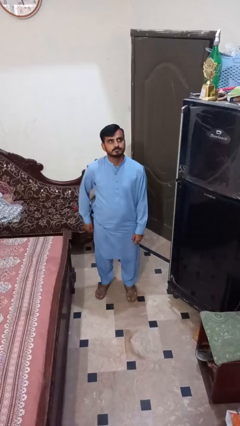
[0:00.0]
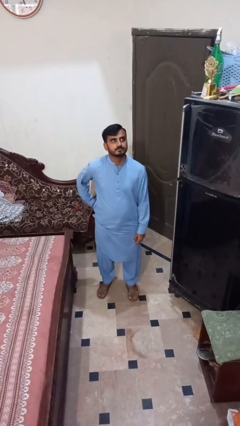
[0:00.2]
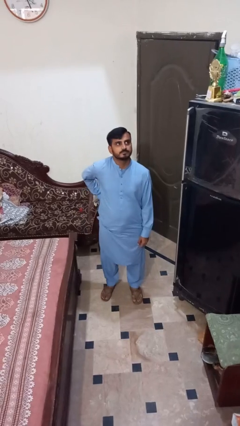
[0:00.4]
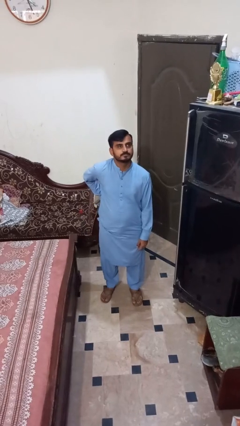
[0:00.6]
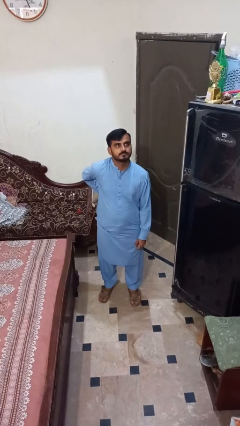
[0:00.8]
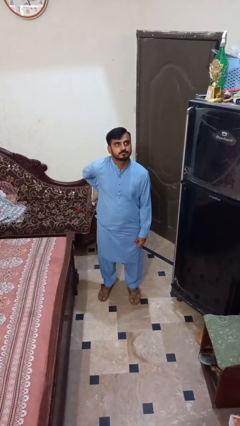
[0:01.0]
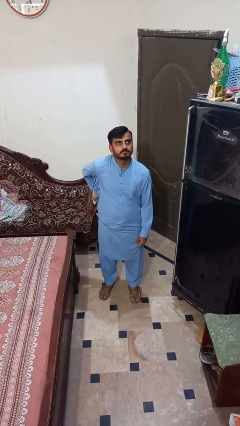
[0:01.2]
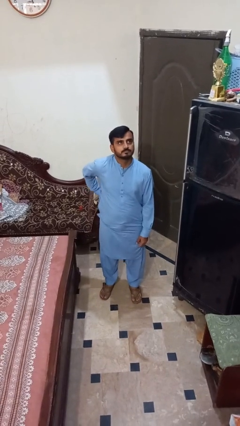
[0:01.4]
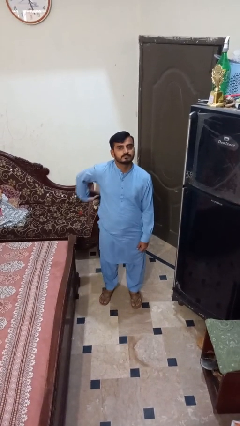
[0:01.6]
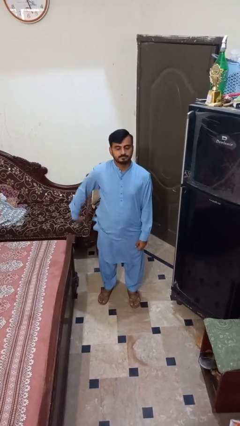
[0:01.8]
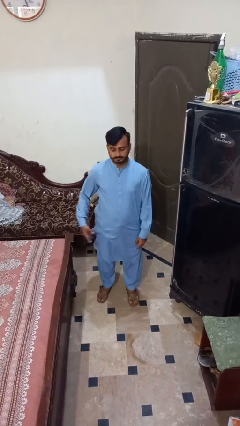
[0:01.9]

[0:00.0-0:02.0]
person takes phone from pocket

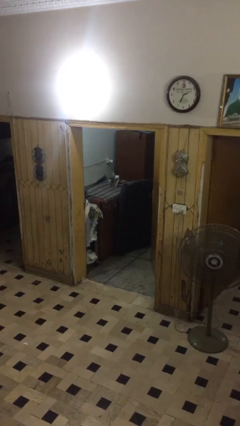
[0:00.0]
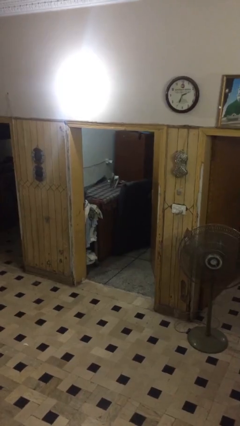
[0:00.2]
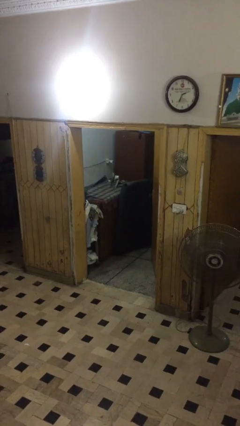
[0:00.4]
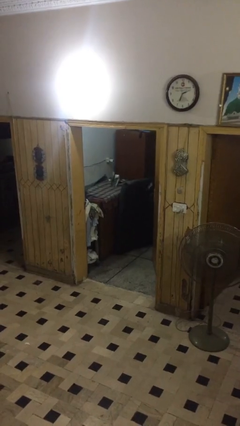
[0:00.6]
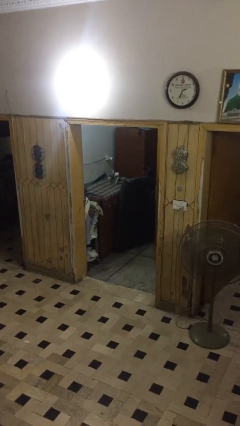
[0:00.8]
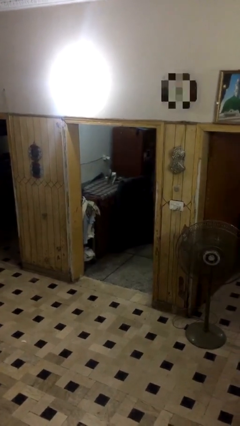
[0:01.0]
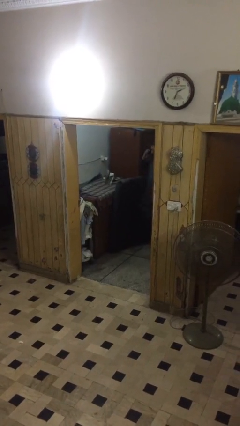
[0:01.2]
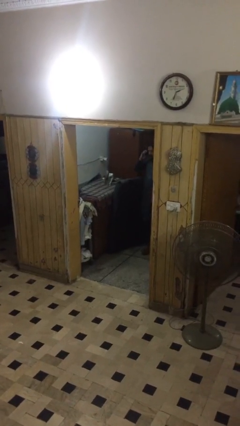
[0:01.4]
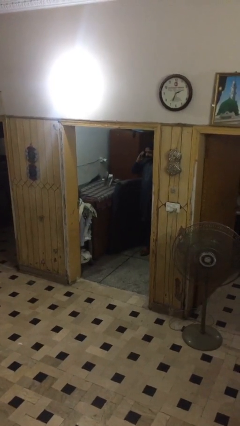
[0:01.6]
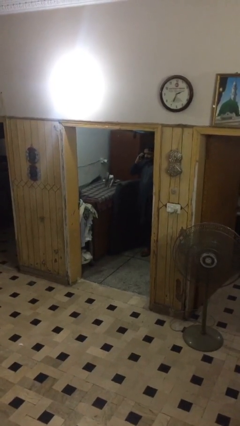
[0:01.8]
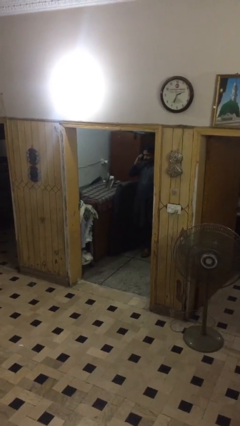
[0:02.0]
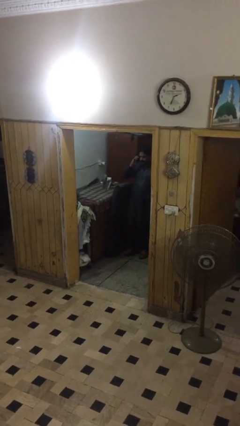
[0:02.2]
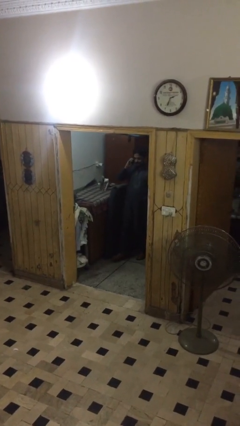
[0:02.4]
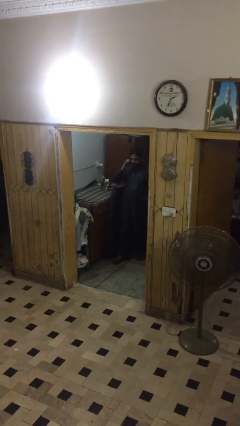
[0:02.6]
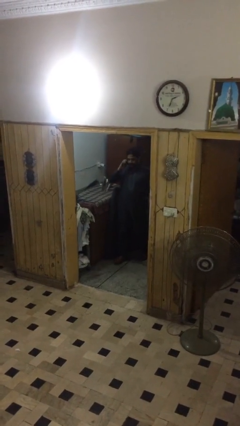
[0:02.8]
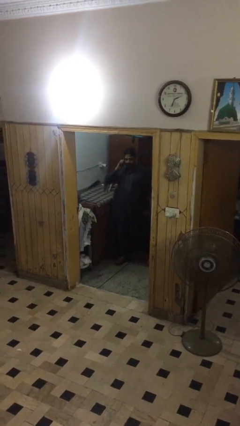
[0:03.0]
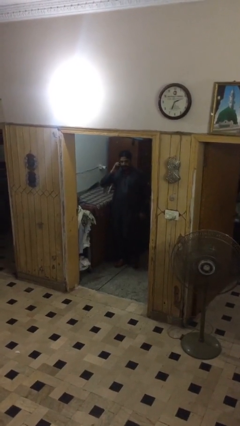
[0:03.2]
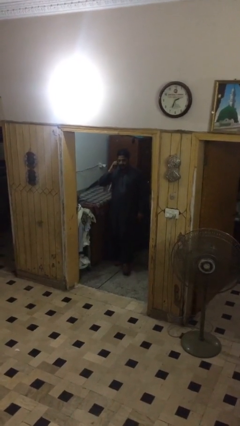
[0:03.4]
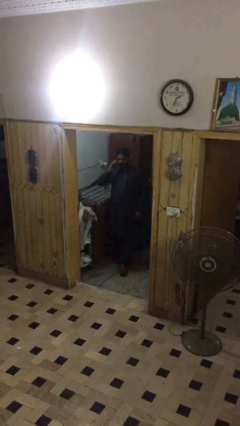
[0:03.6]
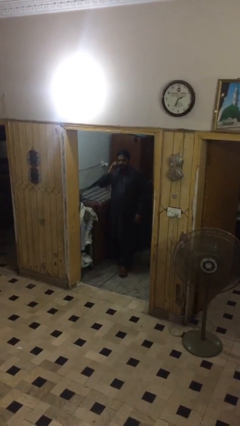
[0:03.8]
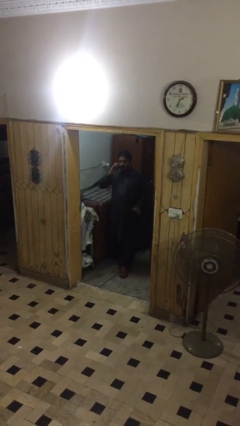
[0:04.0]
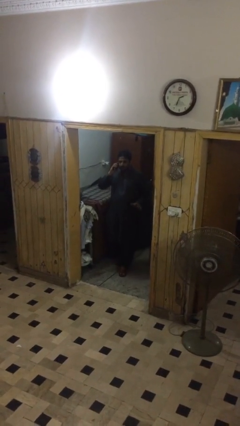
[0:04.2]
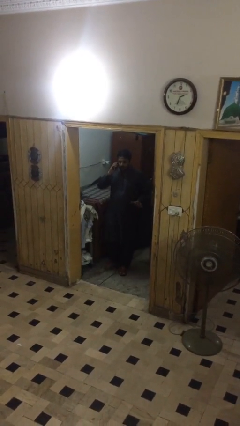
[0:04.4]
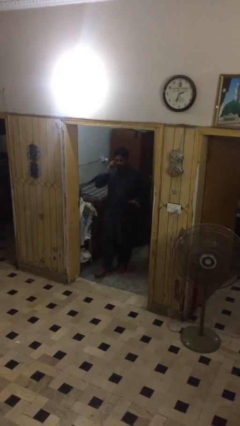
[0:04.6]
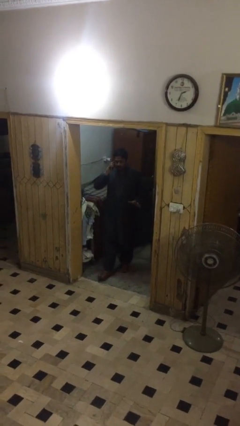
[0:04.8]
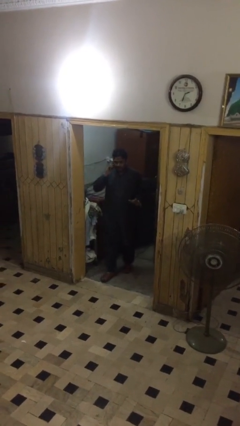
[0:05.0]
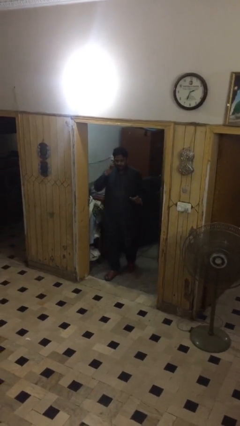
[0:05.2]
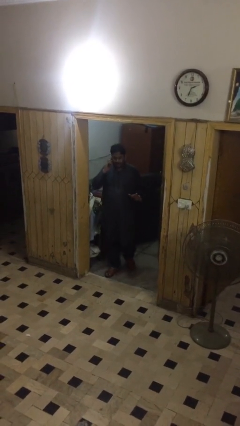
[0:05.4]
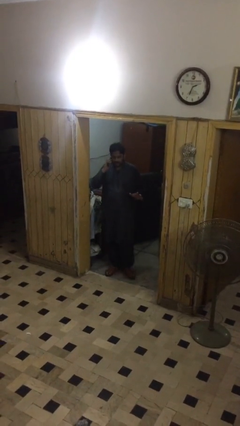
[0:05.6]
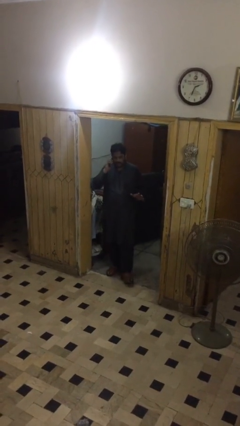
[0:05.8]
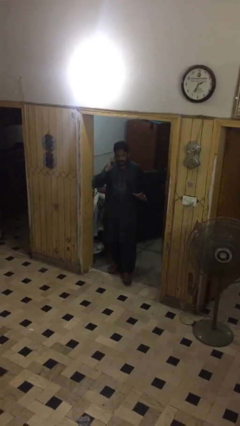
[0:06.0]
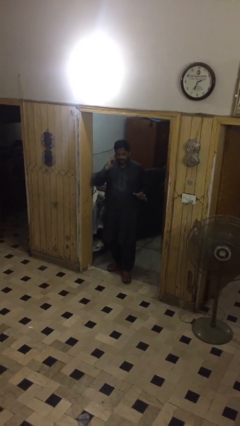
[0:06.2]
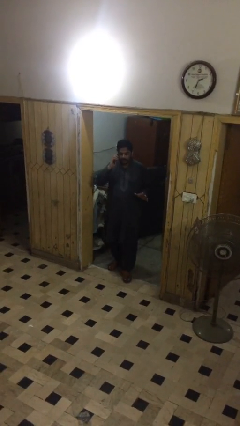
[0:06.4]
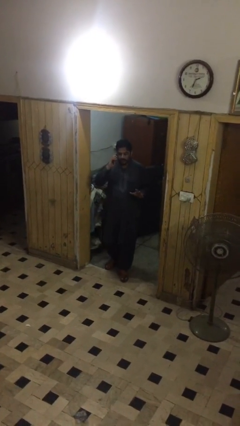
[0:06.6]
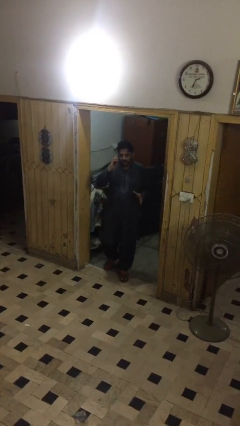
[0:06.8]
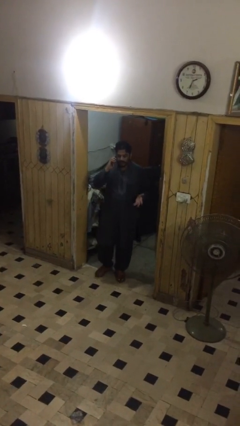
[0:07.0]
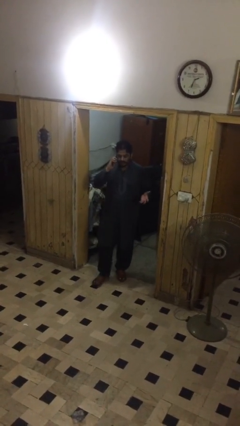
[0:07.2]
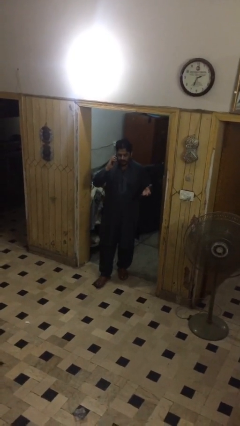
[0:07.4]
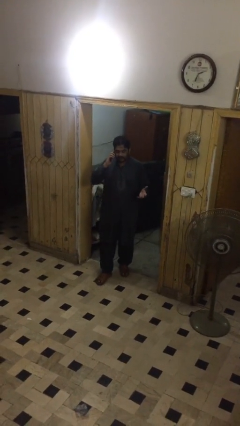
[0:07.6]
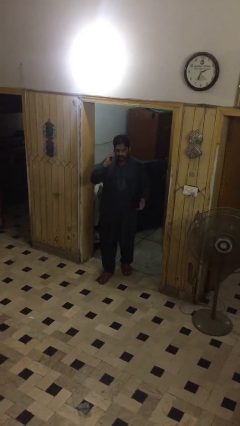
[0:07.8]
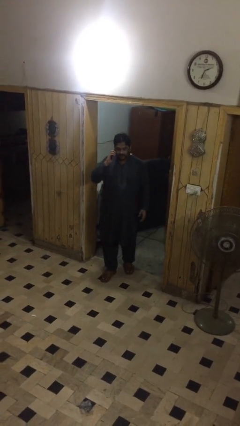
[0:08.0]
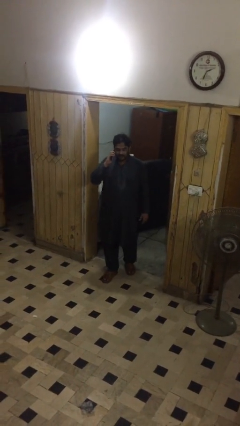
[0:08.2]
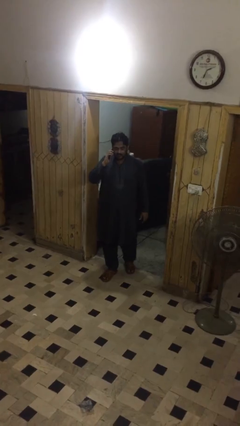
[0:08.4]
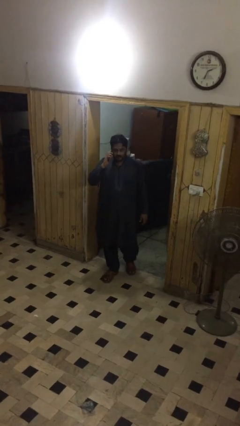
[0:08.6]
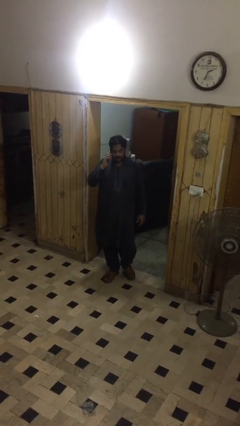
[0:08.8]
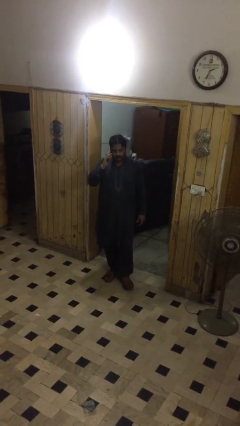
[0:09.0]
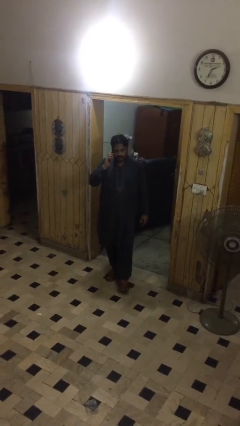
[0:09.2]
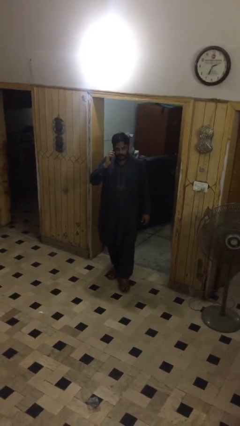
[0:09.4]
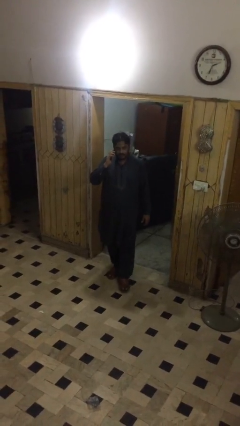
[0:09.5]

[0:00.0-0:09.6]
person enters scene through structure

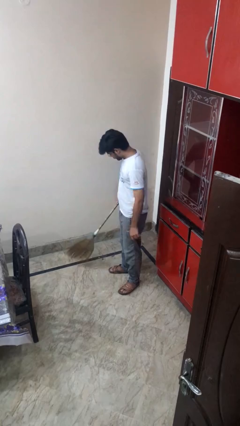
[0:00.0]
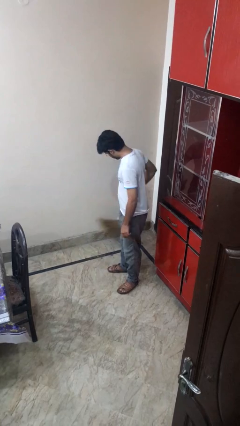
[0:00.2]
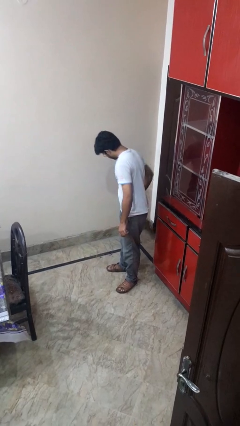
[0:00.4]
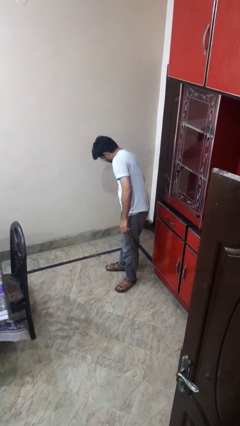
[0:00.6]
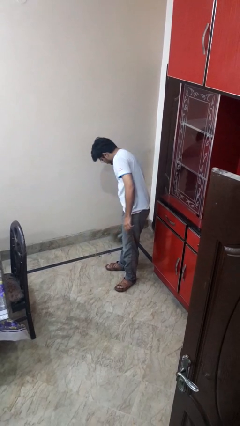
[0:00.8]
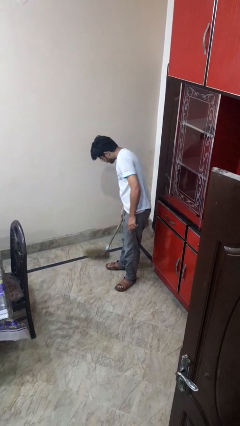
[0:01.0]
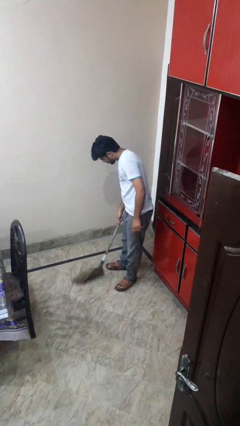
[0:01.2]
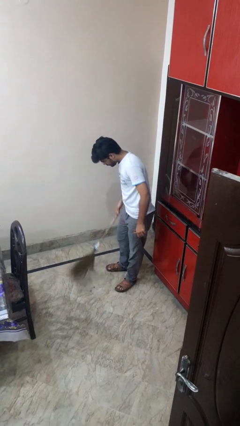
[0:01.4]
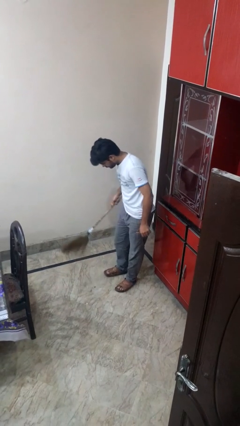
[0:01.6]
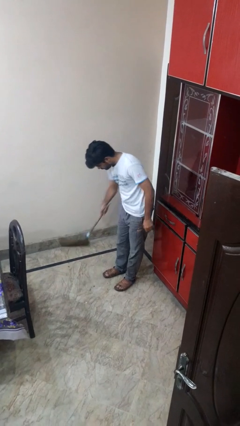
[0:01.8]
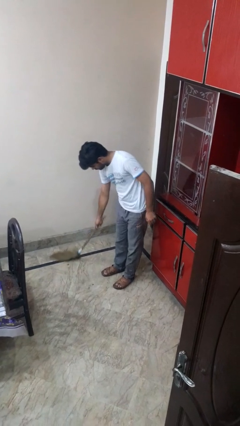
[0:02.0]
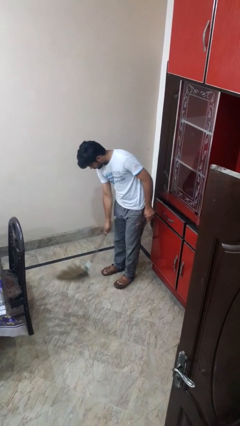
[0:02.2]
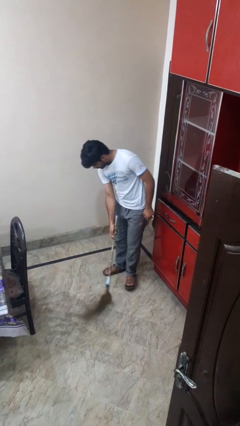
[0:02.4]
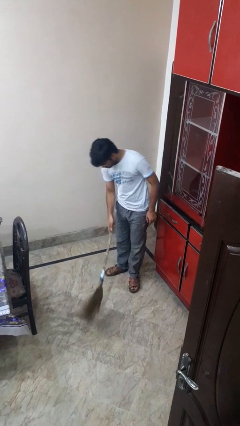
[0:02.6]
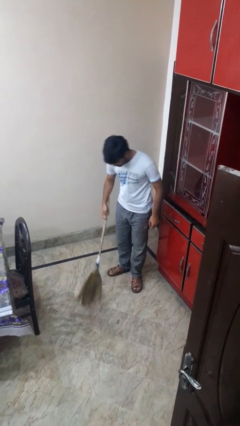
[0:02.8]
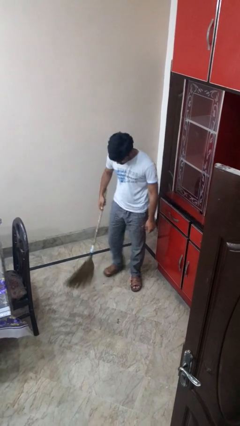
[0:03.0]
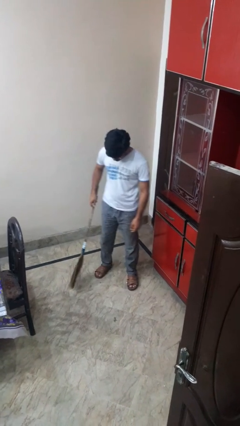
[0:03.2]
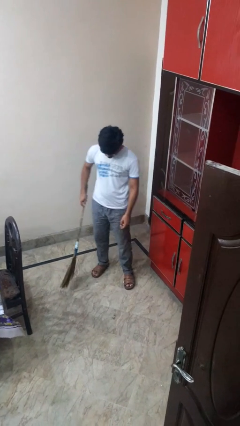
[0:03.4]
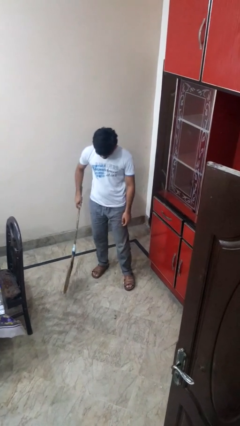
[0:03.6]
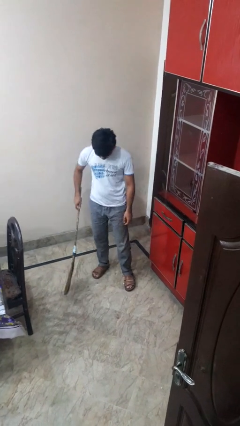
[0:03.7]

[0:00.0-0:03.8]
person sweeps floor

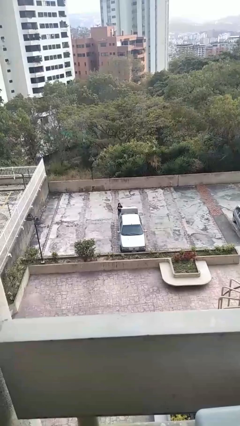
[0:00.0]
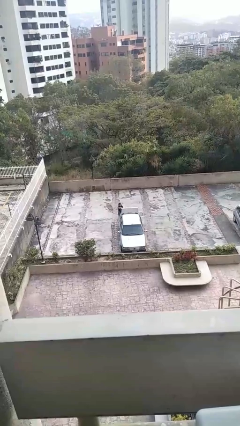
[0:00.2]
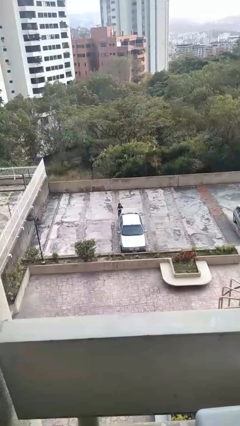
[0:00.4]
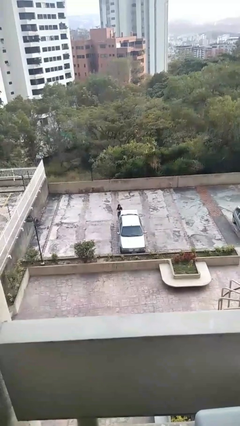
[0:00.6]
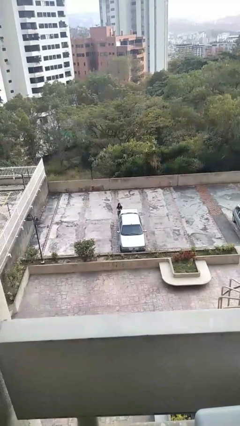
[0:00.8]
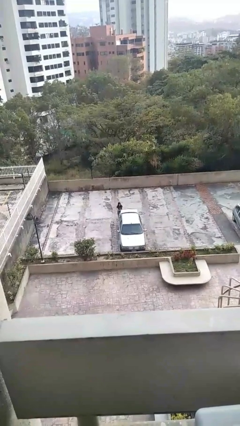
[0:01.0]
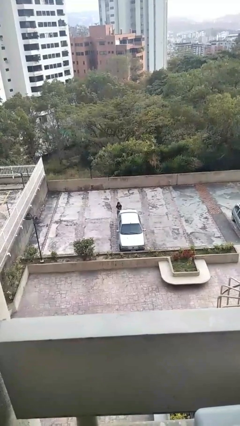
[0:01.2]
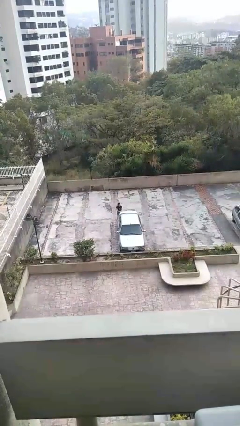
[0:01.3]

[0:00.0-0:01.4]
person closes car trunk

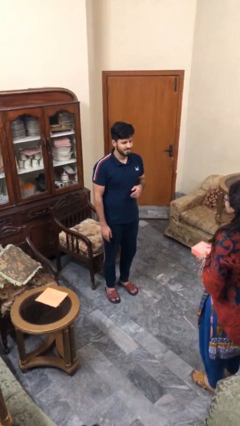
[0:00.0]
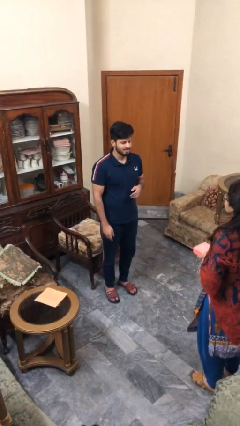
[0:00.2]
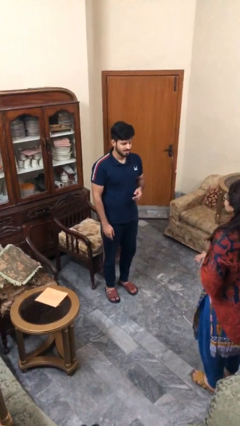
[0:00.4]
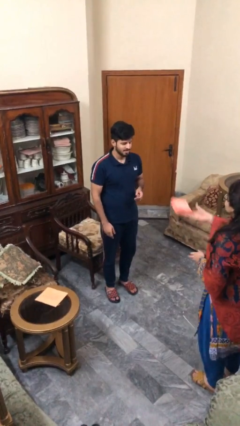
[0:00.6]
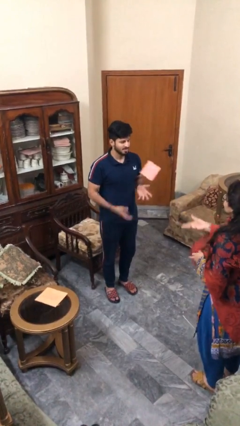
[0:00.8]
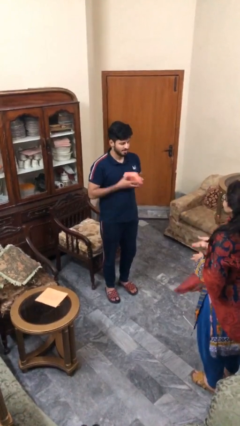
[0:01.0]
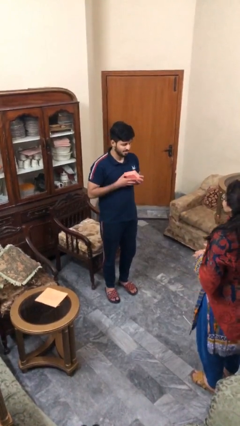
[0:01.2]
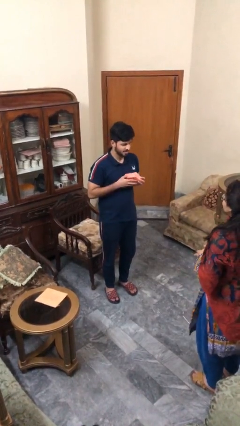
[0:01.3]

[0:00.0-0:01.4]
person catches object from person
